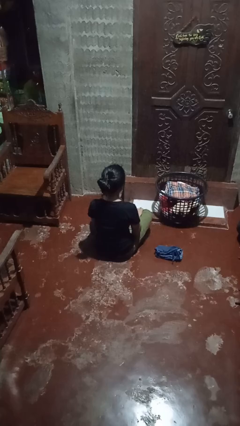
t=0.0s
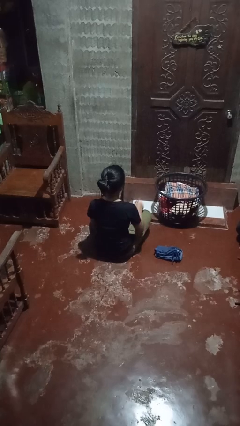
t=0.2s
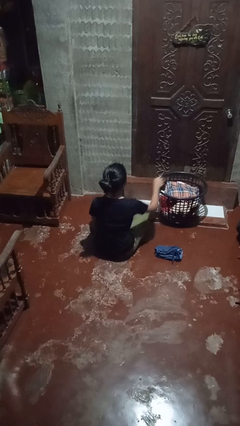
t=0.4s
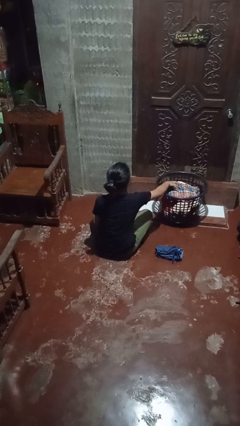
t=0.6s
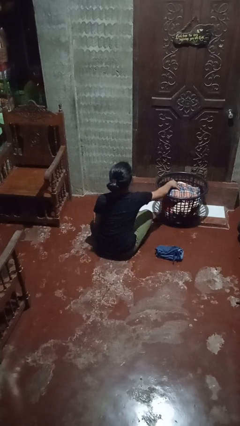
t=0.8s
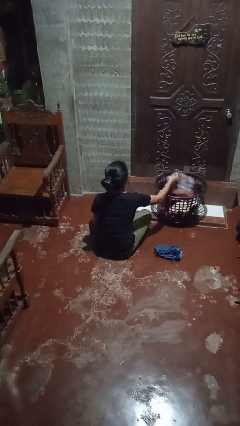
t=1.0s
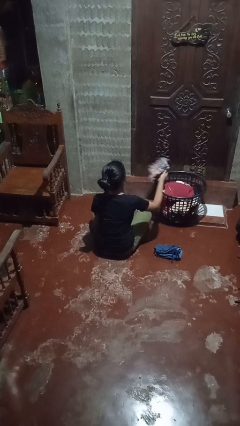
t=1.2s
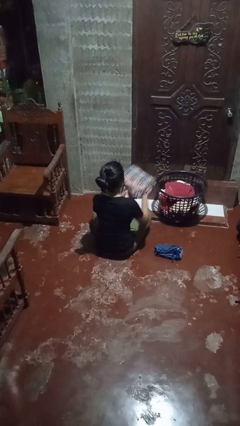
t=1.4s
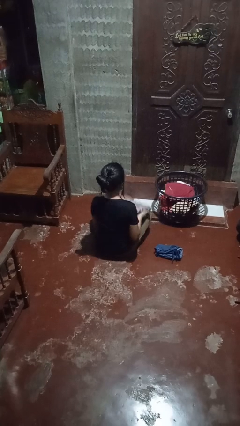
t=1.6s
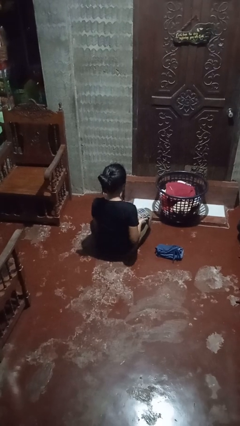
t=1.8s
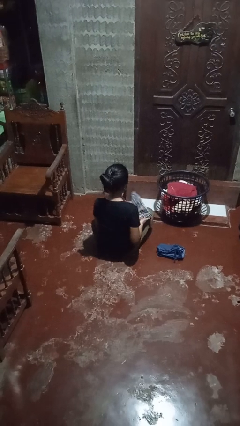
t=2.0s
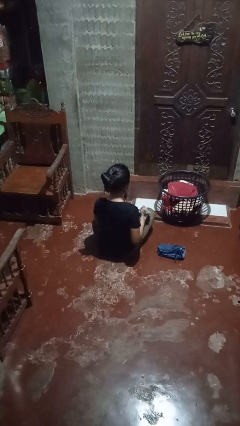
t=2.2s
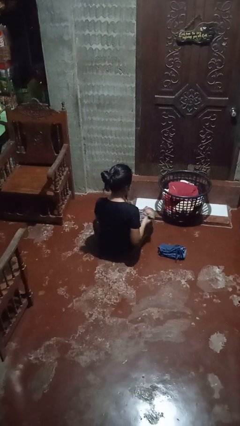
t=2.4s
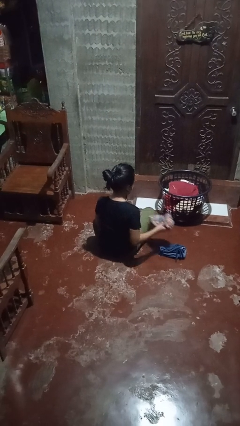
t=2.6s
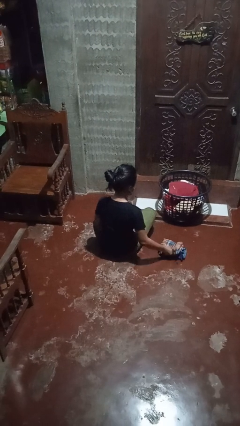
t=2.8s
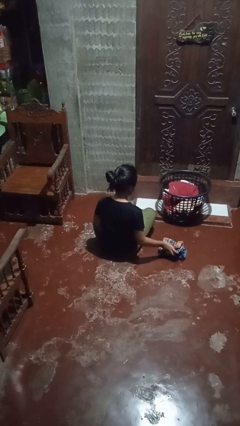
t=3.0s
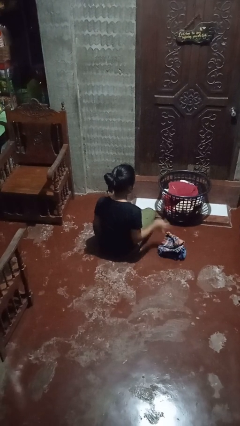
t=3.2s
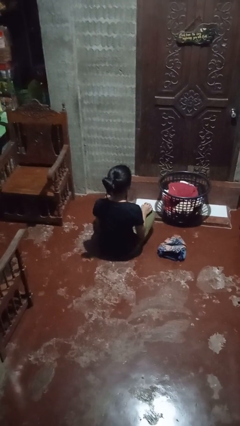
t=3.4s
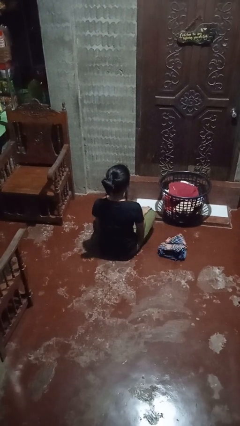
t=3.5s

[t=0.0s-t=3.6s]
person folds pants

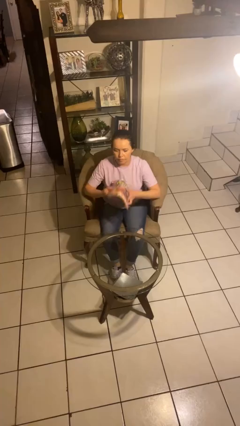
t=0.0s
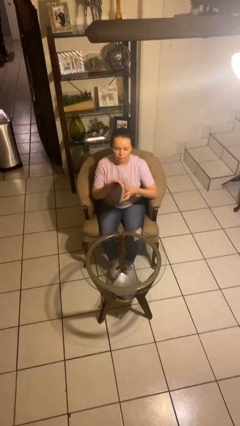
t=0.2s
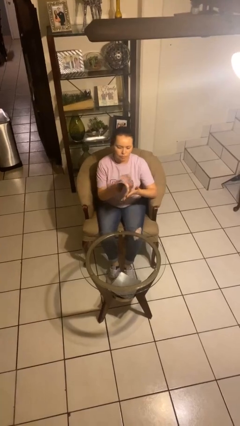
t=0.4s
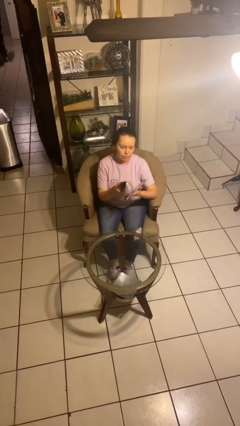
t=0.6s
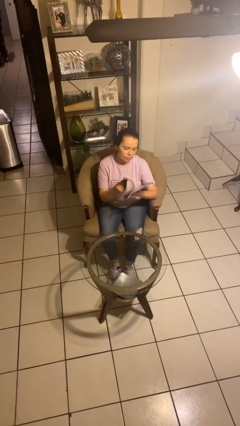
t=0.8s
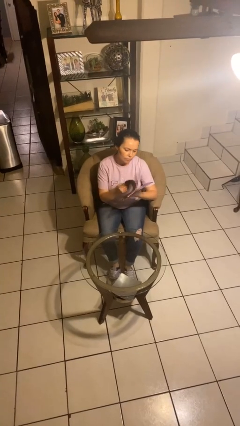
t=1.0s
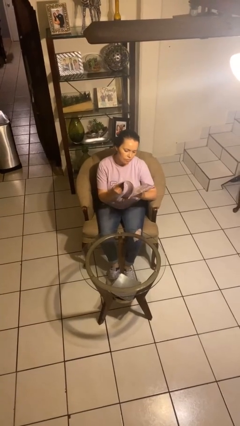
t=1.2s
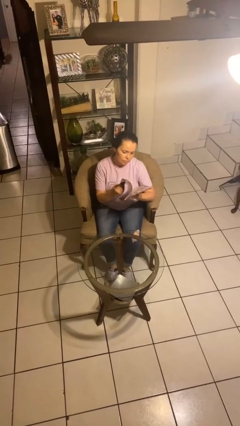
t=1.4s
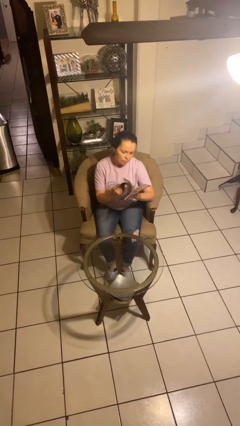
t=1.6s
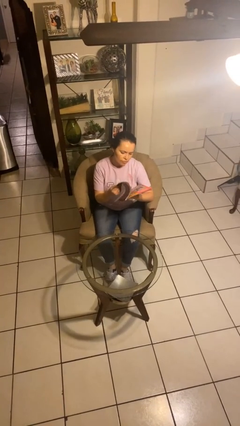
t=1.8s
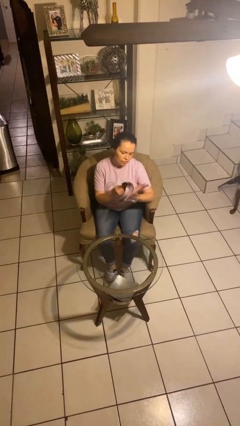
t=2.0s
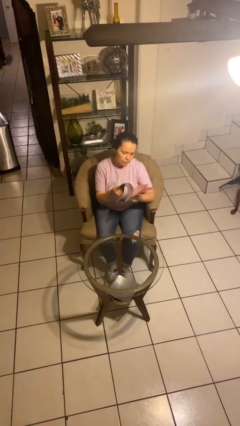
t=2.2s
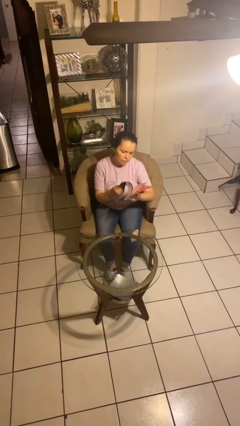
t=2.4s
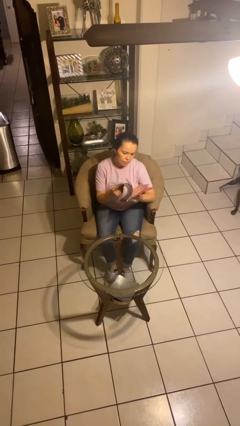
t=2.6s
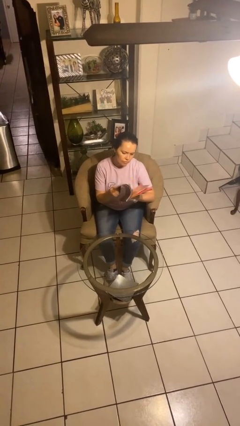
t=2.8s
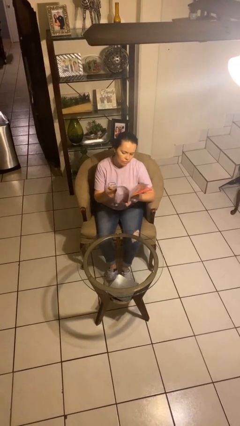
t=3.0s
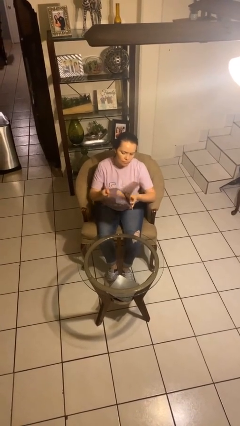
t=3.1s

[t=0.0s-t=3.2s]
person reads magazine

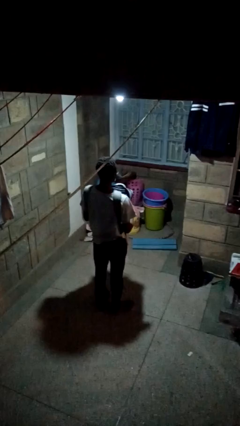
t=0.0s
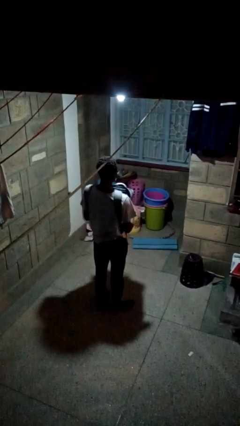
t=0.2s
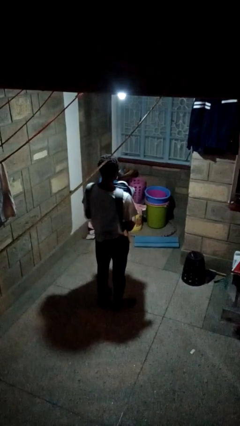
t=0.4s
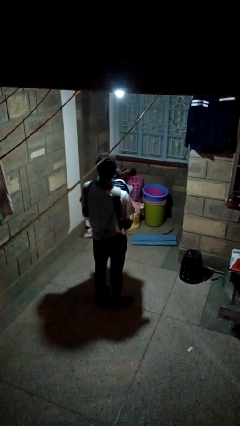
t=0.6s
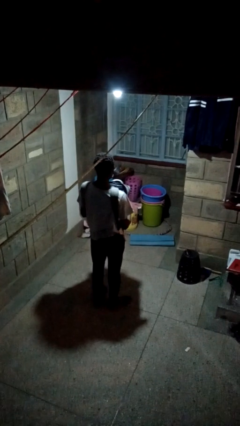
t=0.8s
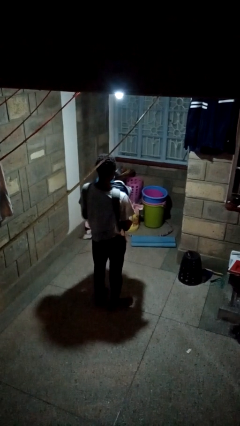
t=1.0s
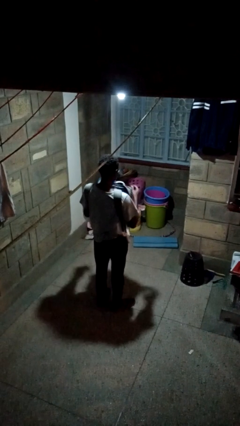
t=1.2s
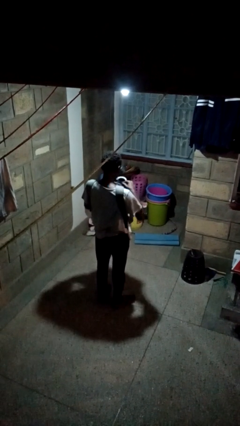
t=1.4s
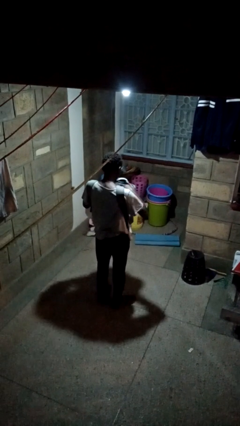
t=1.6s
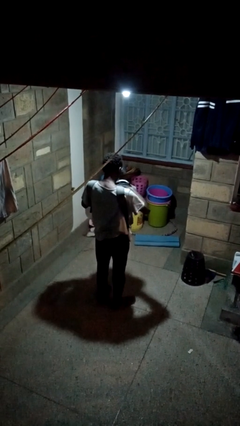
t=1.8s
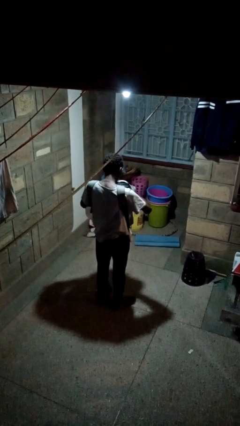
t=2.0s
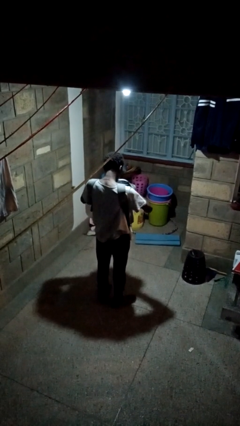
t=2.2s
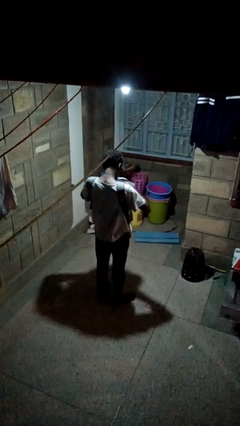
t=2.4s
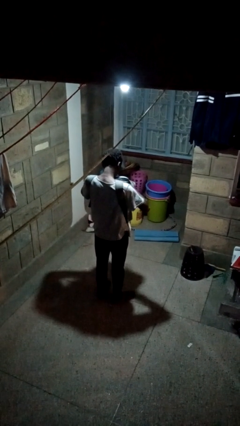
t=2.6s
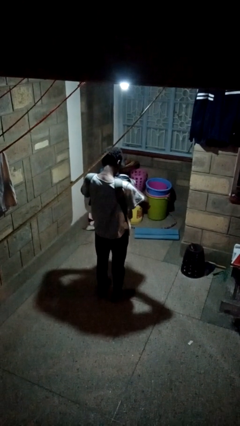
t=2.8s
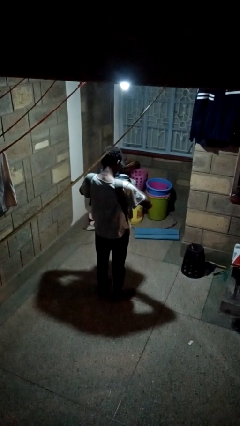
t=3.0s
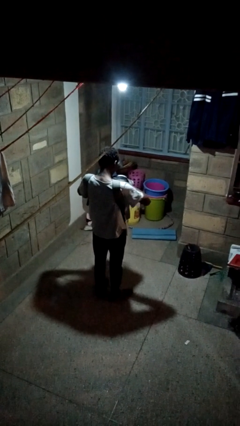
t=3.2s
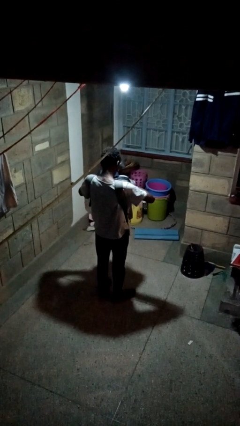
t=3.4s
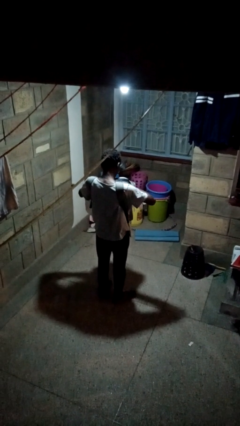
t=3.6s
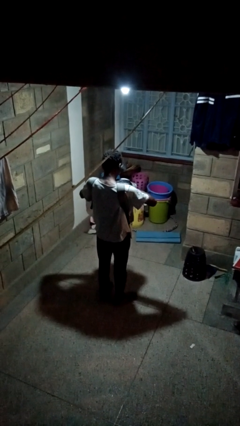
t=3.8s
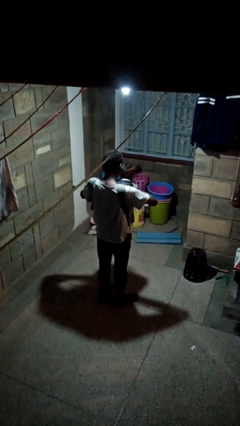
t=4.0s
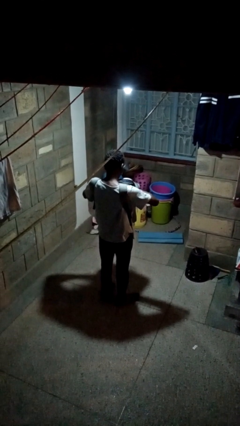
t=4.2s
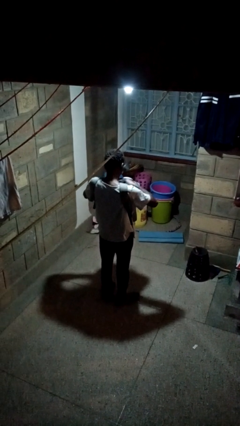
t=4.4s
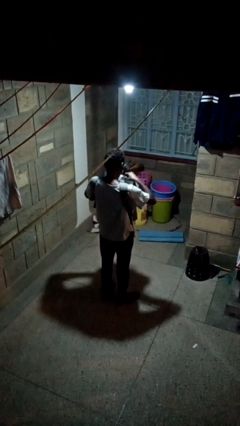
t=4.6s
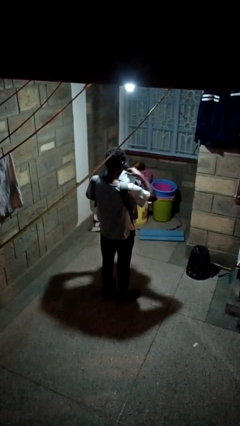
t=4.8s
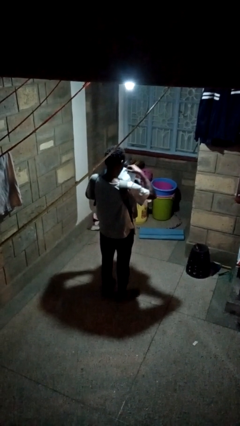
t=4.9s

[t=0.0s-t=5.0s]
person searches in backpack

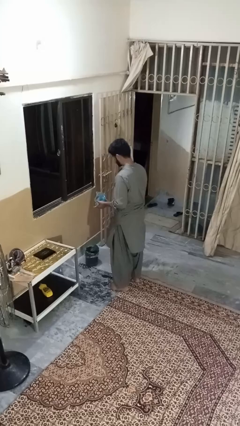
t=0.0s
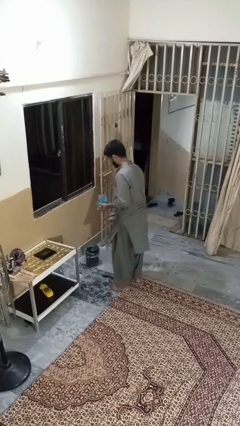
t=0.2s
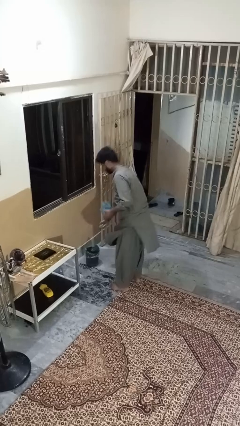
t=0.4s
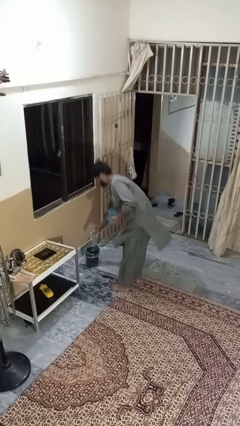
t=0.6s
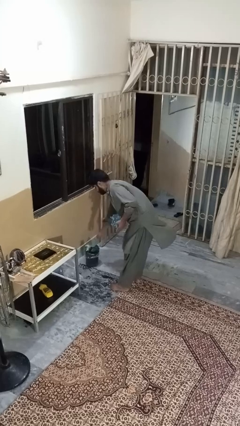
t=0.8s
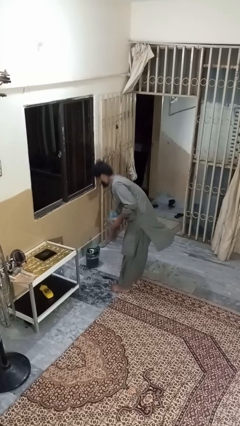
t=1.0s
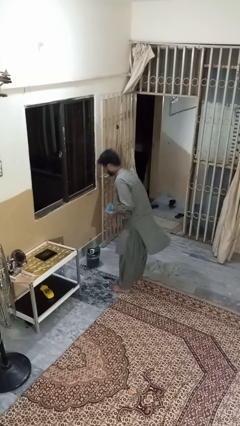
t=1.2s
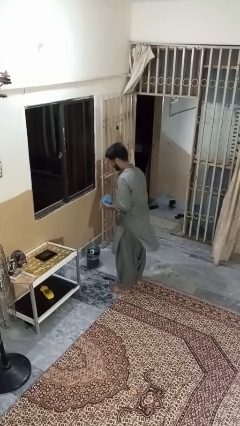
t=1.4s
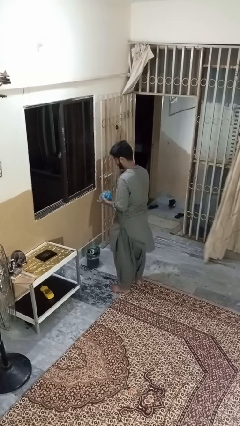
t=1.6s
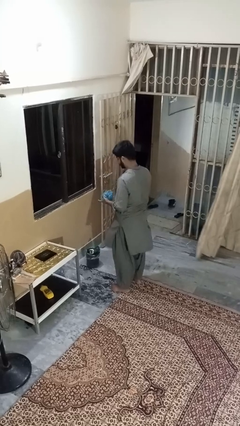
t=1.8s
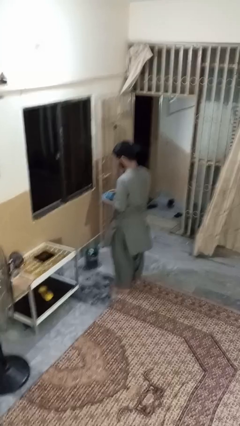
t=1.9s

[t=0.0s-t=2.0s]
person discards trash

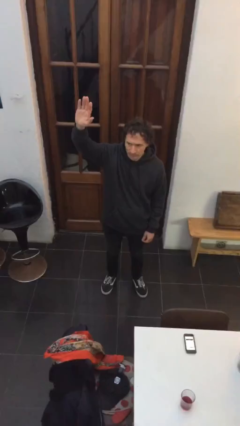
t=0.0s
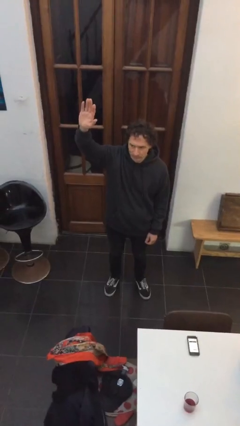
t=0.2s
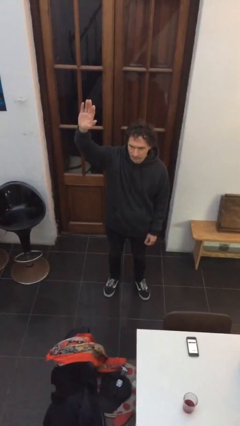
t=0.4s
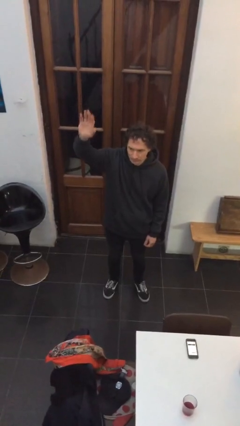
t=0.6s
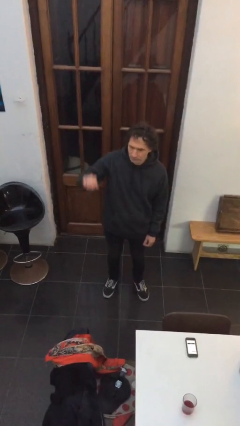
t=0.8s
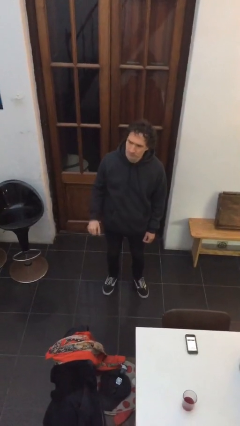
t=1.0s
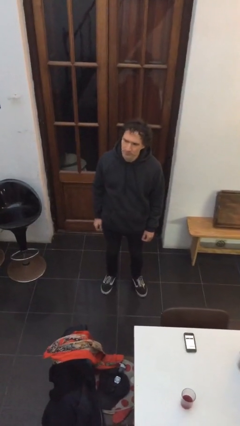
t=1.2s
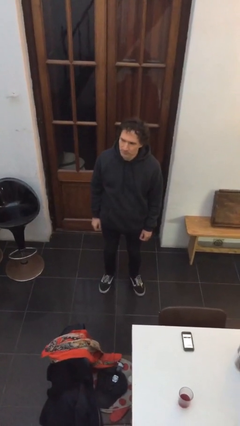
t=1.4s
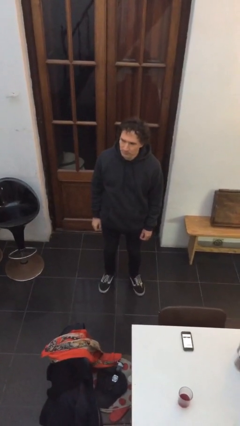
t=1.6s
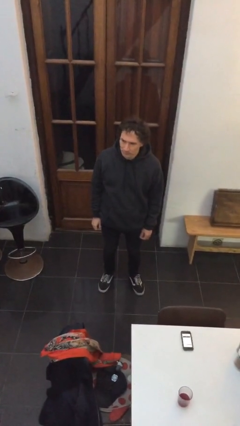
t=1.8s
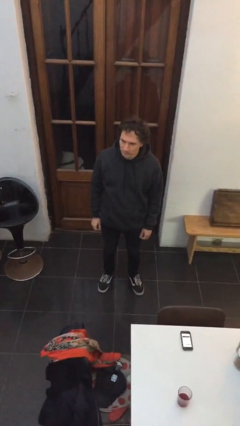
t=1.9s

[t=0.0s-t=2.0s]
person gestures lower hand

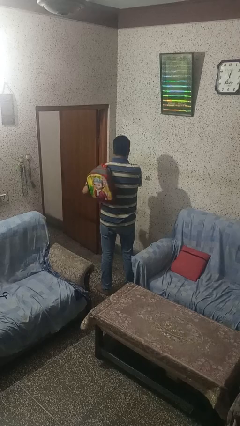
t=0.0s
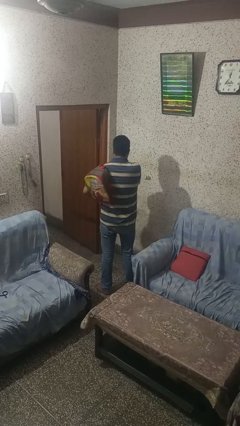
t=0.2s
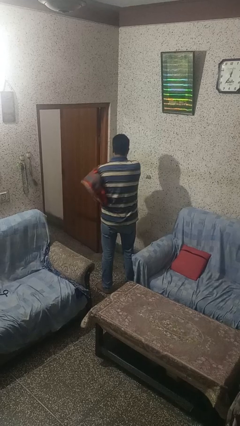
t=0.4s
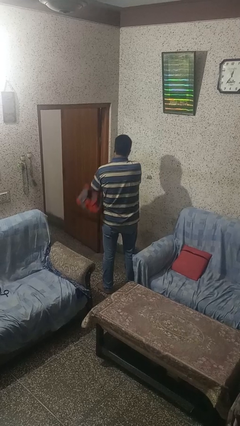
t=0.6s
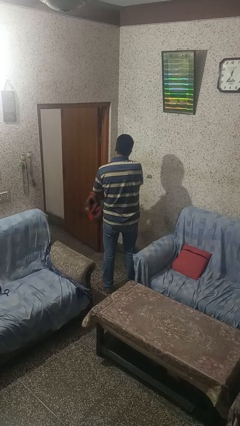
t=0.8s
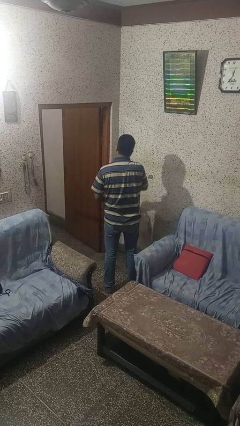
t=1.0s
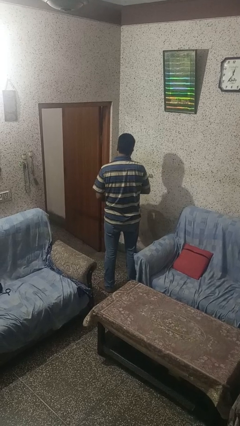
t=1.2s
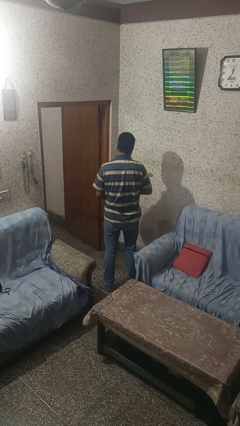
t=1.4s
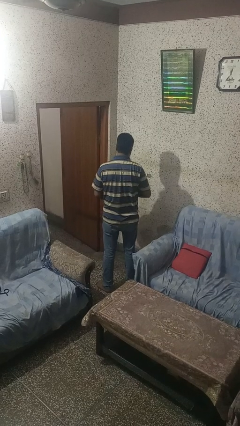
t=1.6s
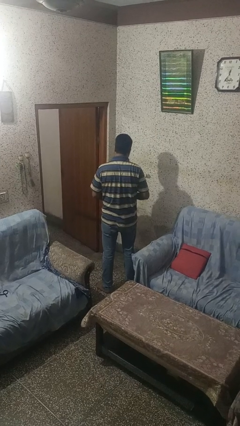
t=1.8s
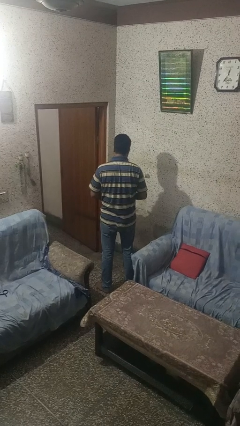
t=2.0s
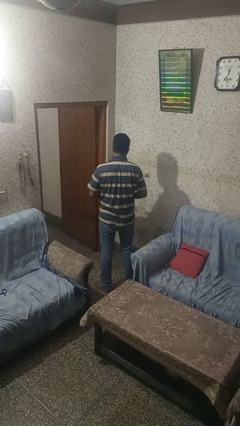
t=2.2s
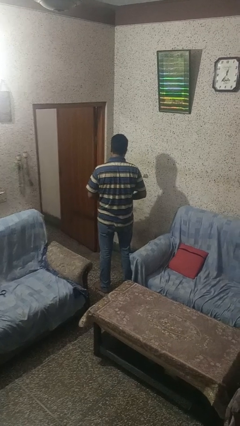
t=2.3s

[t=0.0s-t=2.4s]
person takes off backpack
